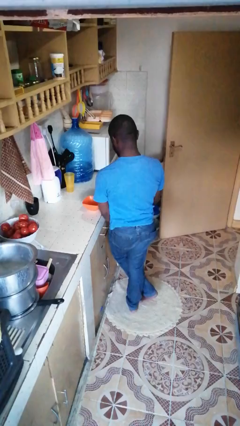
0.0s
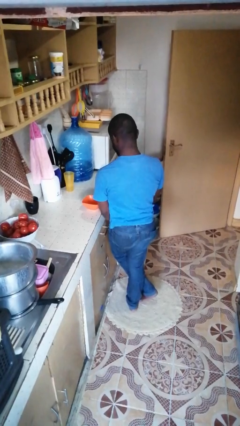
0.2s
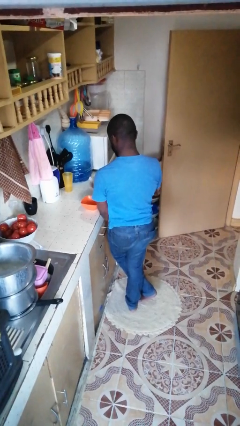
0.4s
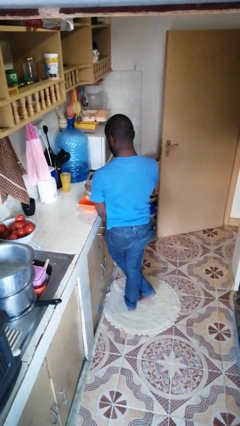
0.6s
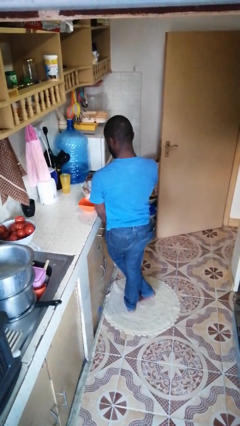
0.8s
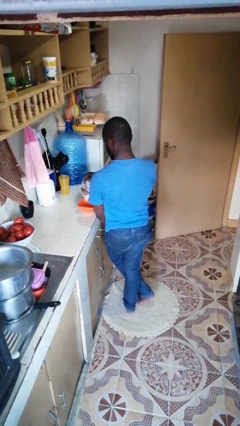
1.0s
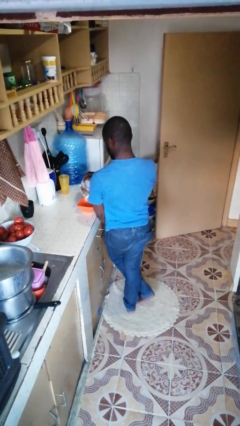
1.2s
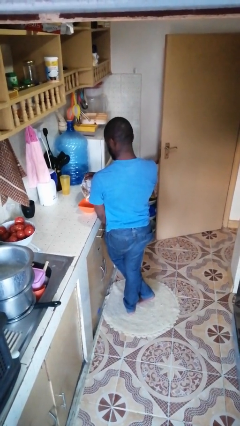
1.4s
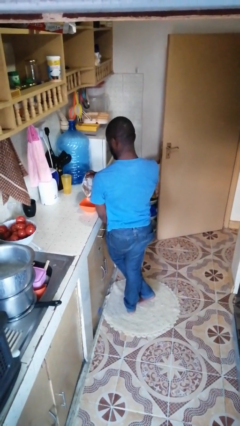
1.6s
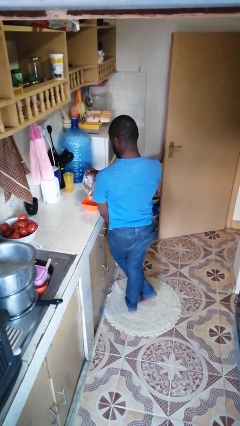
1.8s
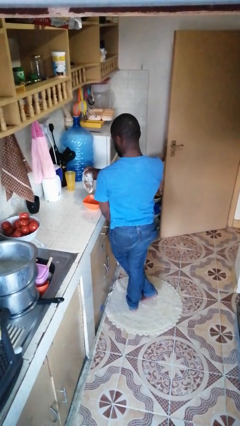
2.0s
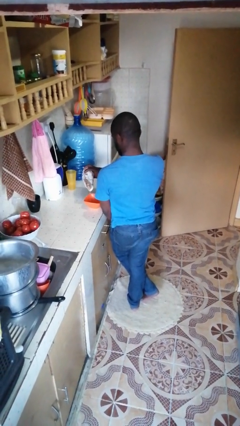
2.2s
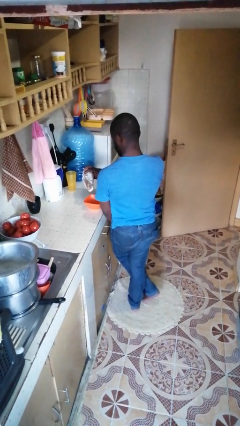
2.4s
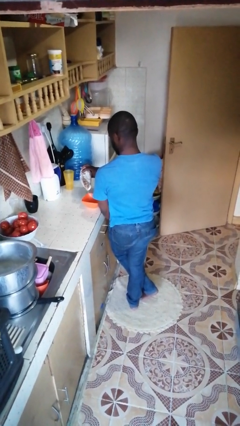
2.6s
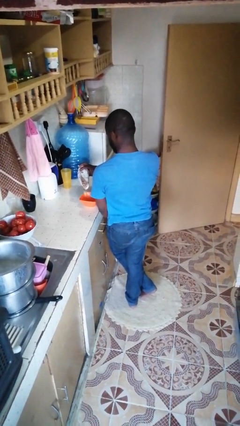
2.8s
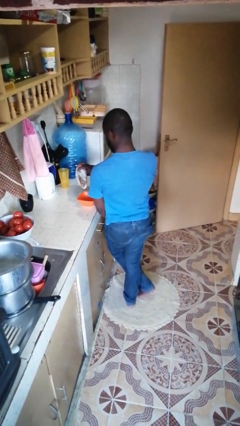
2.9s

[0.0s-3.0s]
person pours into bowl

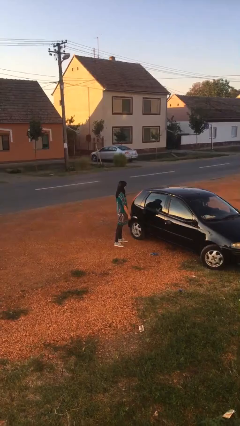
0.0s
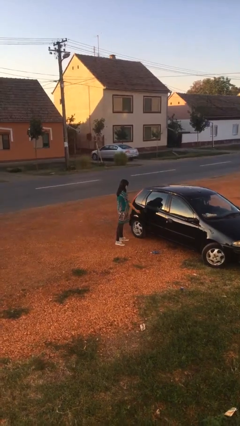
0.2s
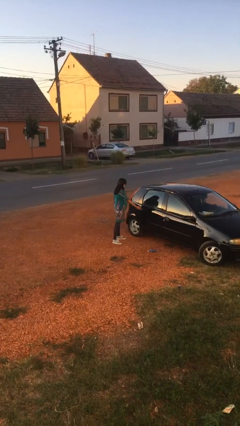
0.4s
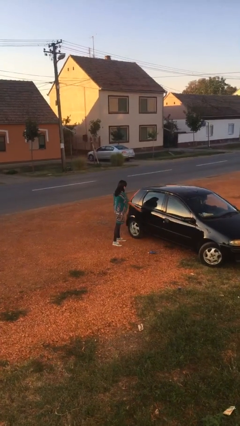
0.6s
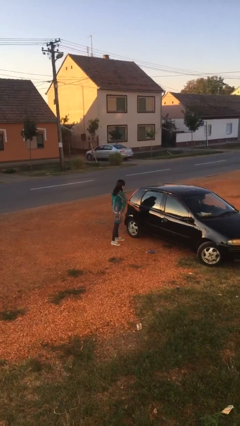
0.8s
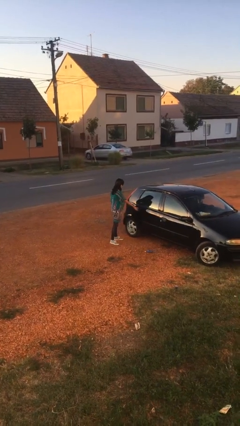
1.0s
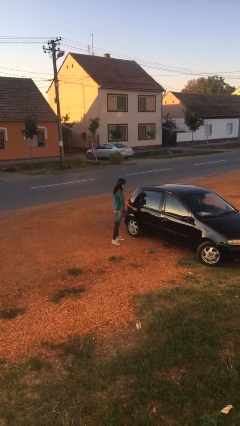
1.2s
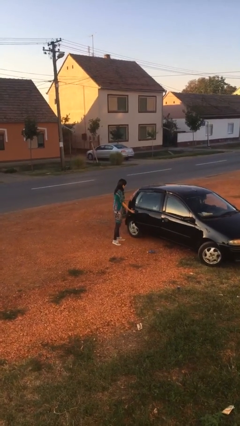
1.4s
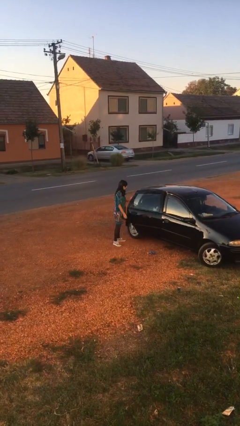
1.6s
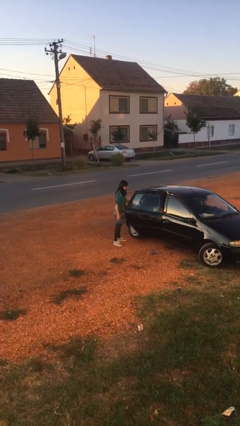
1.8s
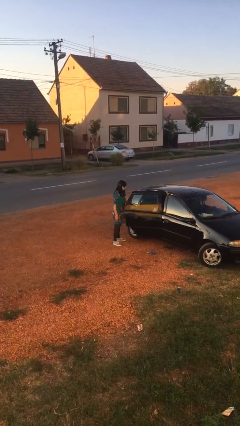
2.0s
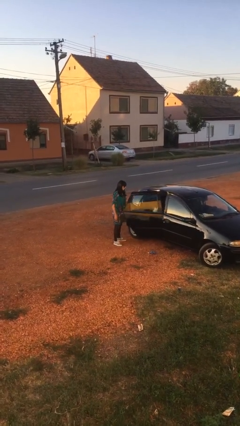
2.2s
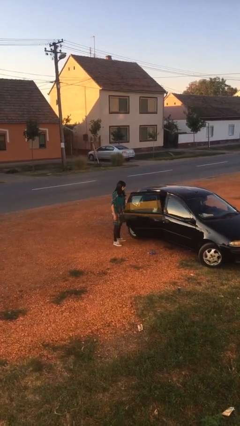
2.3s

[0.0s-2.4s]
person opens car door

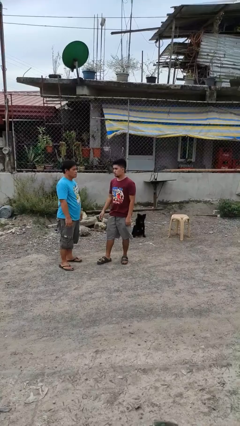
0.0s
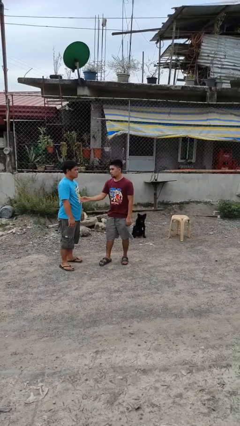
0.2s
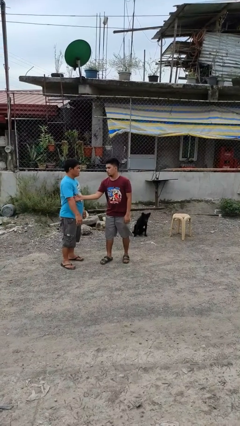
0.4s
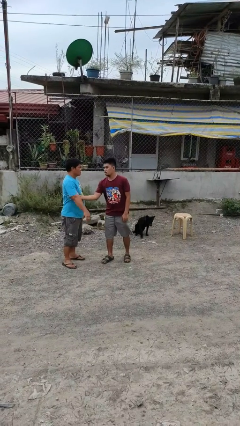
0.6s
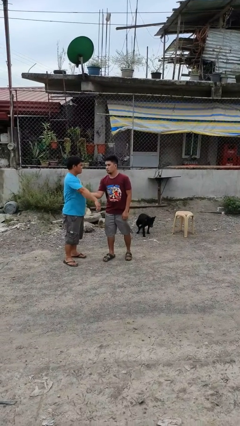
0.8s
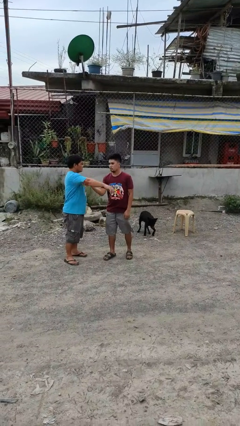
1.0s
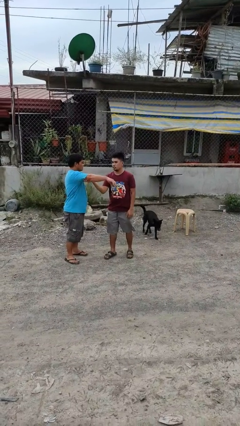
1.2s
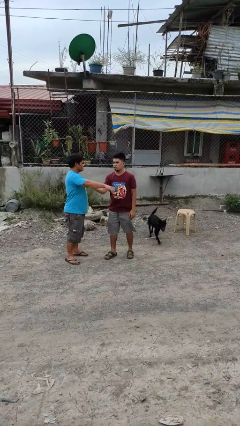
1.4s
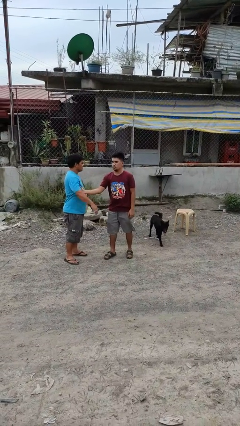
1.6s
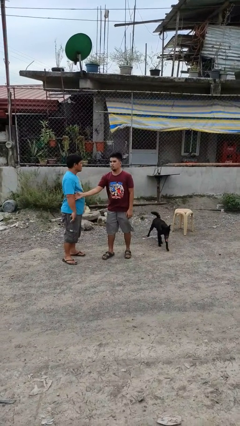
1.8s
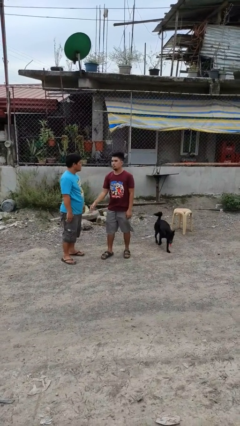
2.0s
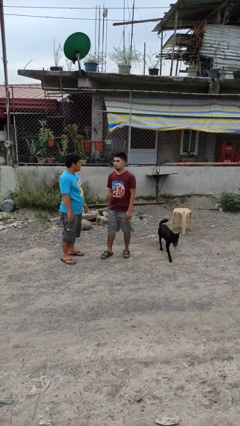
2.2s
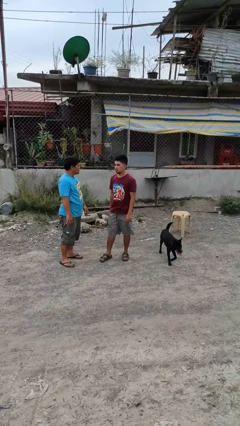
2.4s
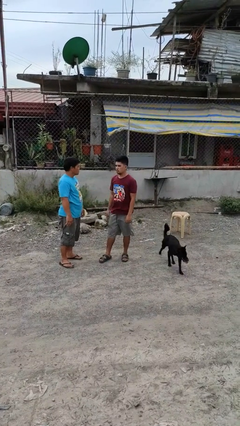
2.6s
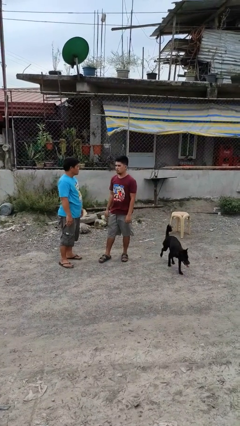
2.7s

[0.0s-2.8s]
person grabs person by bicep

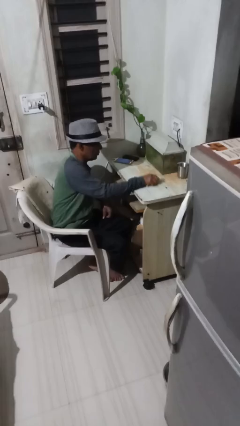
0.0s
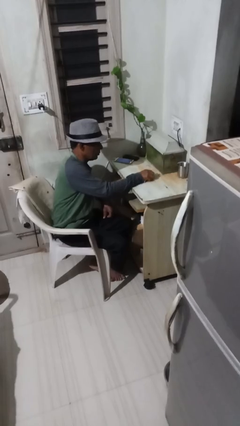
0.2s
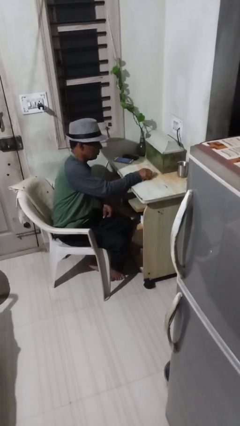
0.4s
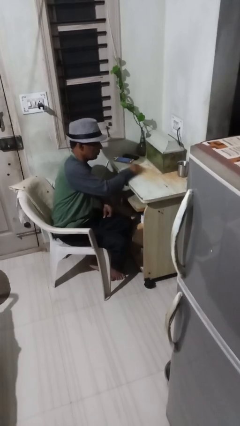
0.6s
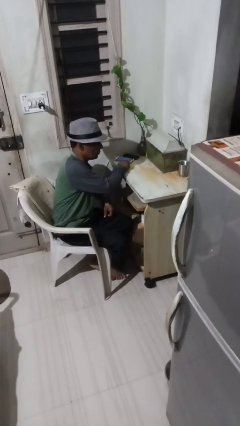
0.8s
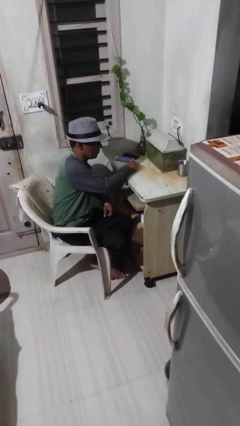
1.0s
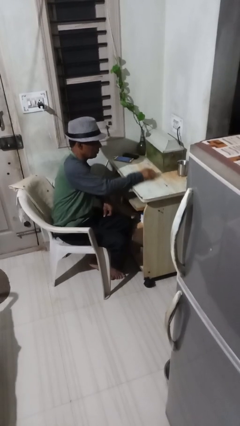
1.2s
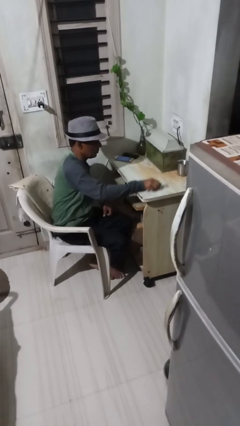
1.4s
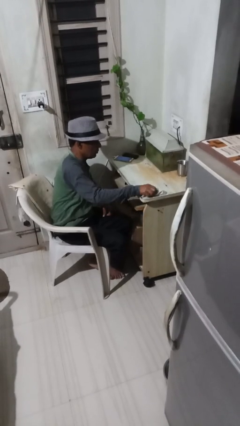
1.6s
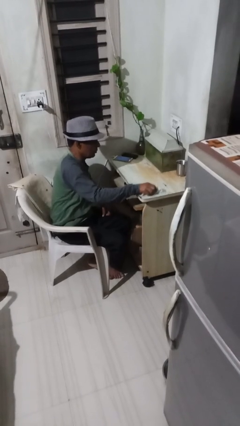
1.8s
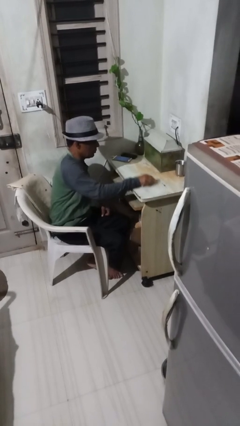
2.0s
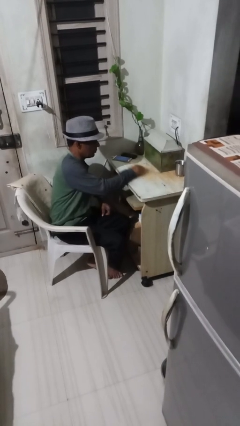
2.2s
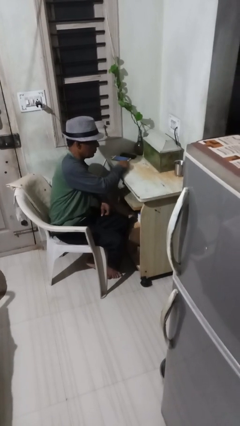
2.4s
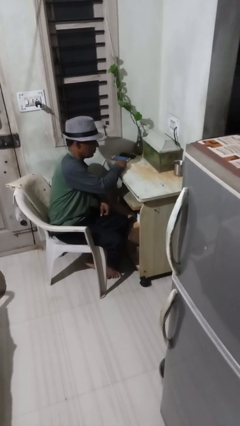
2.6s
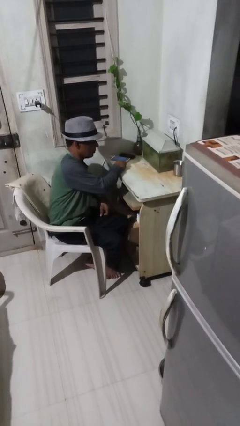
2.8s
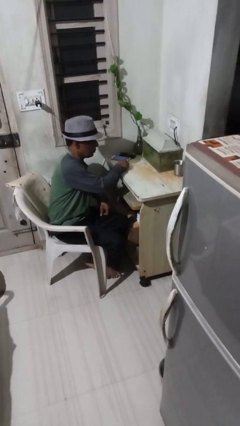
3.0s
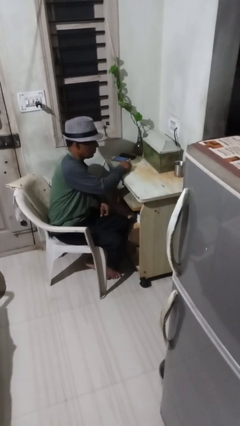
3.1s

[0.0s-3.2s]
person cleans table with rag

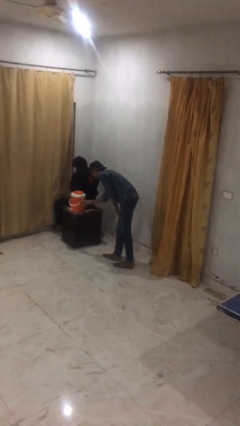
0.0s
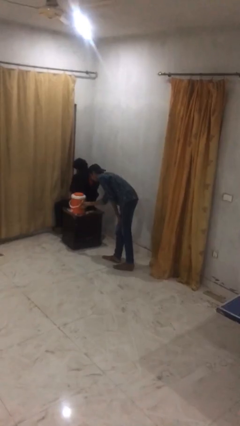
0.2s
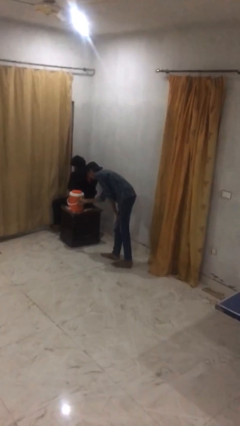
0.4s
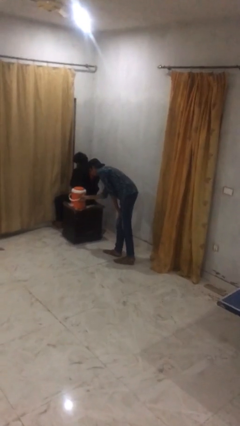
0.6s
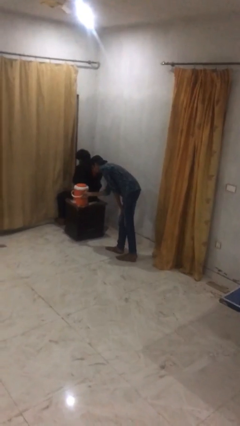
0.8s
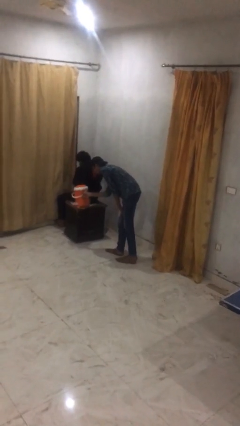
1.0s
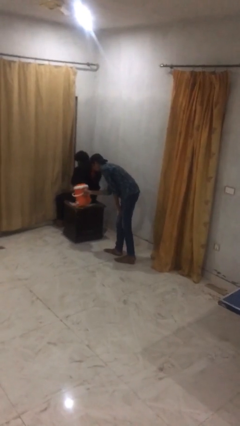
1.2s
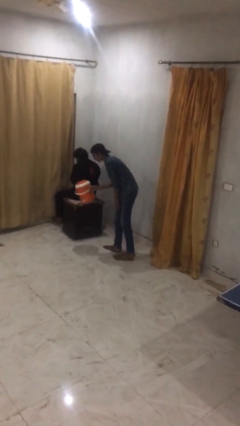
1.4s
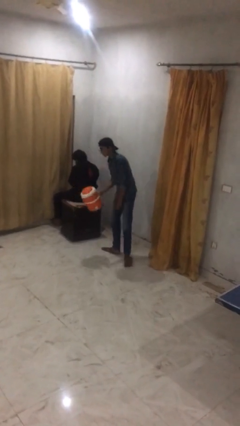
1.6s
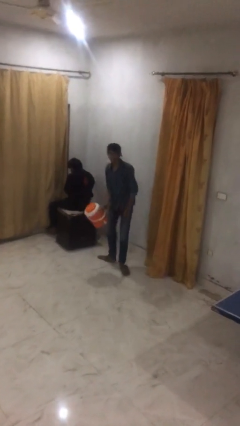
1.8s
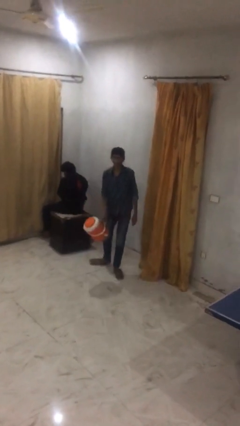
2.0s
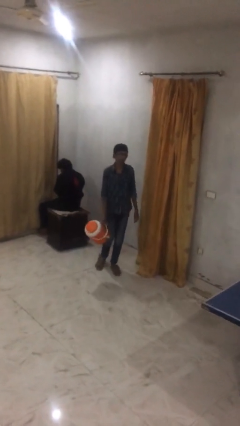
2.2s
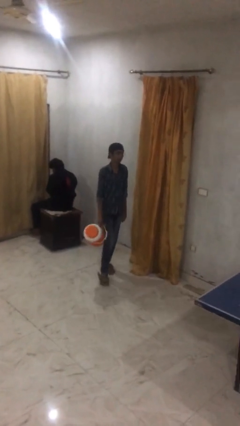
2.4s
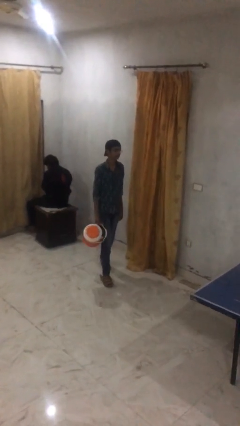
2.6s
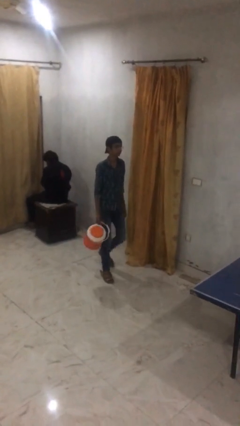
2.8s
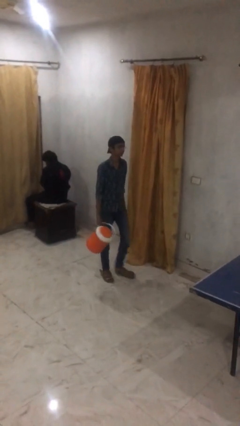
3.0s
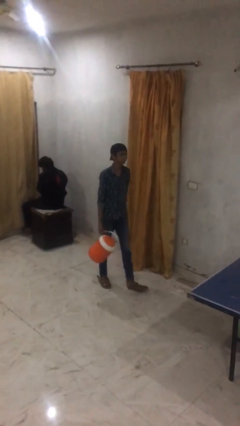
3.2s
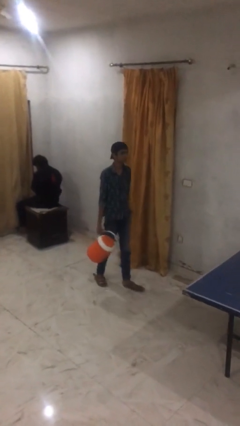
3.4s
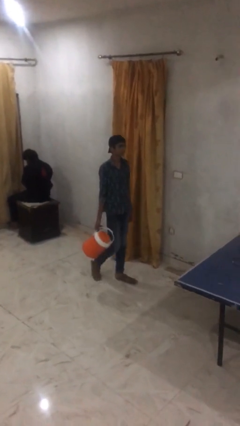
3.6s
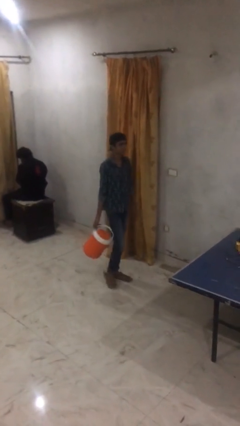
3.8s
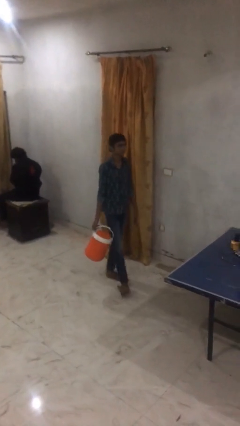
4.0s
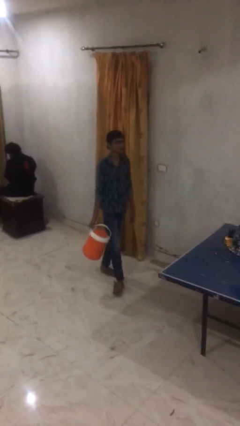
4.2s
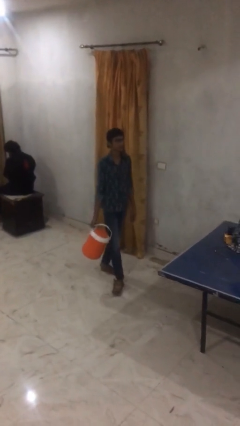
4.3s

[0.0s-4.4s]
person steals object from person

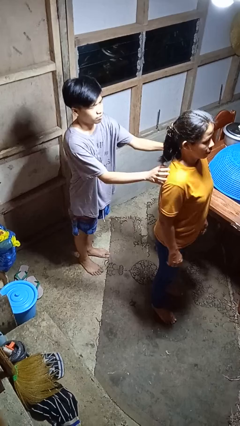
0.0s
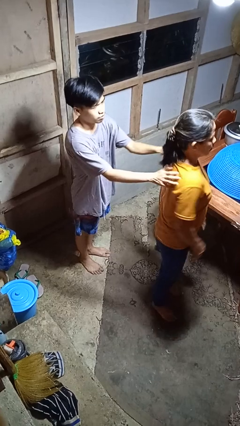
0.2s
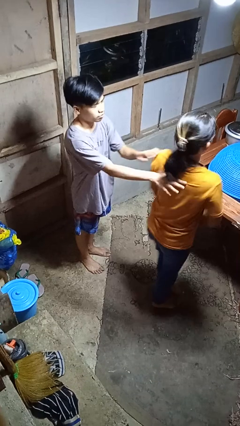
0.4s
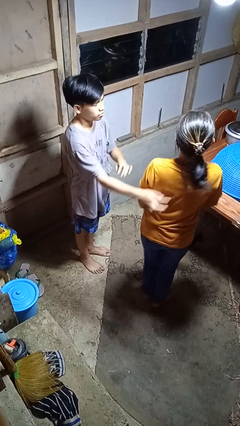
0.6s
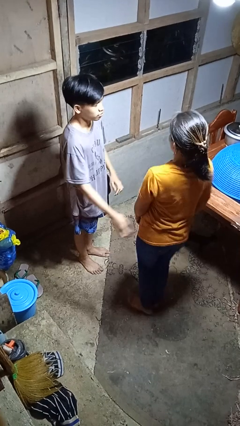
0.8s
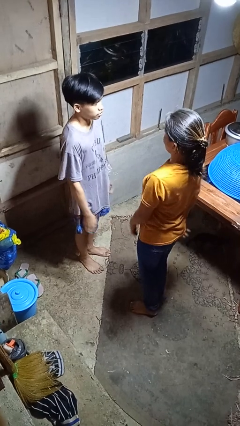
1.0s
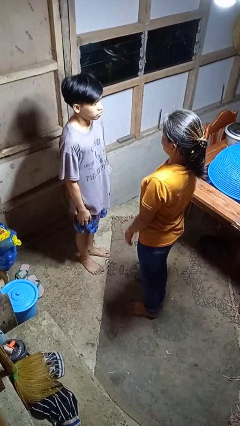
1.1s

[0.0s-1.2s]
person spins person around

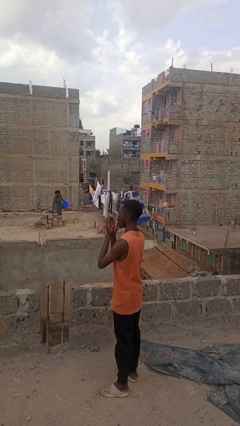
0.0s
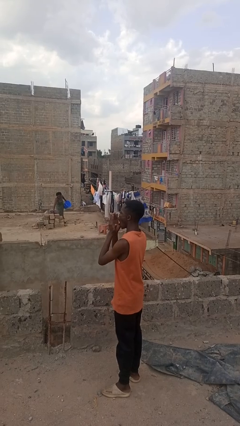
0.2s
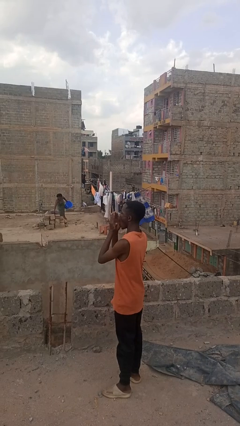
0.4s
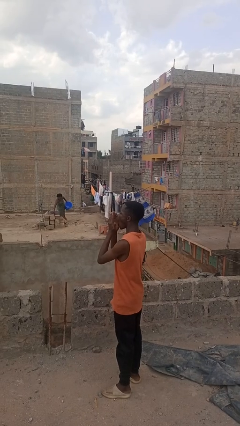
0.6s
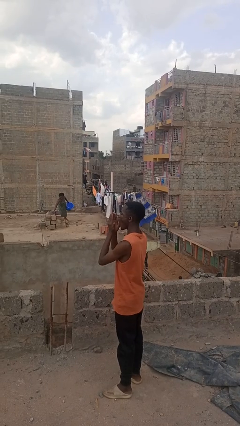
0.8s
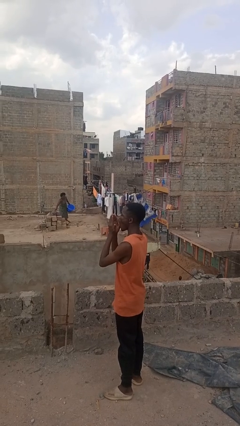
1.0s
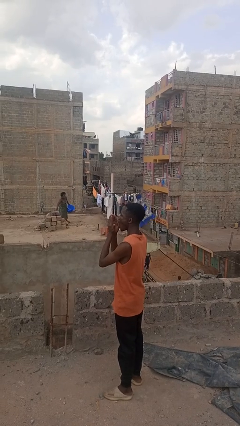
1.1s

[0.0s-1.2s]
person blows into hands
